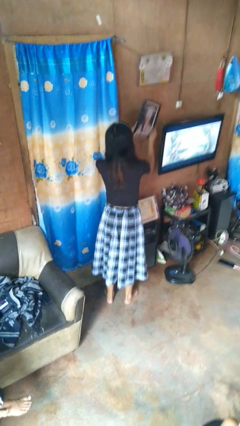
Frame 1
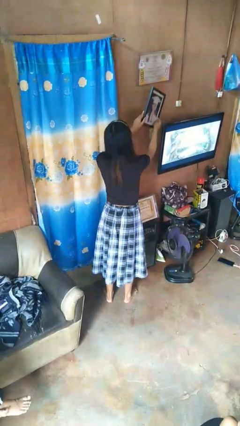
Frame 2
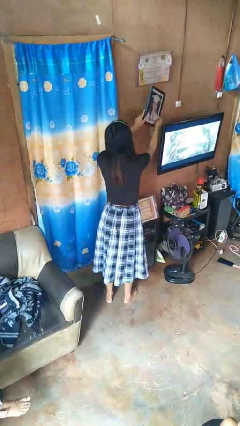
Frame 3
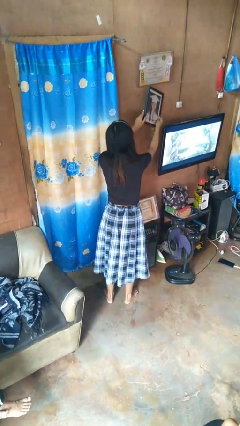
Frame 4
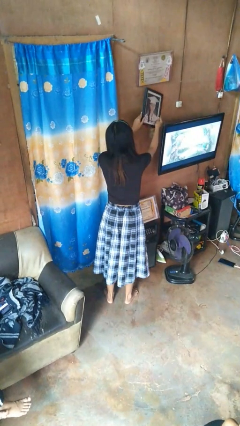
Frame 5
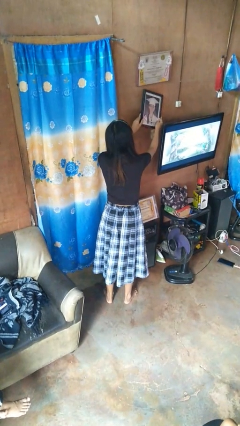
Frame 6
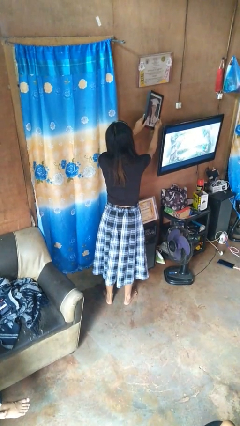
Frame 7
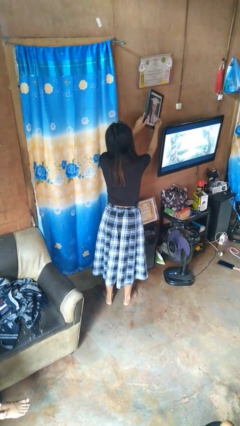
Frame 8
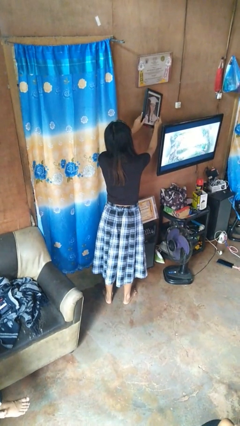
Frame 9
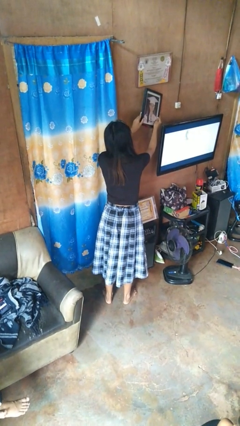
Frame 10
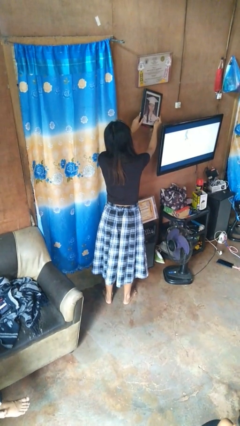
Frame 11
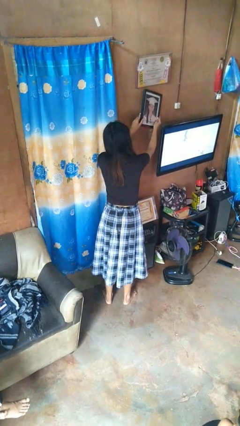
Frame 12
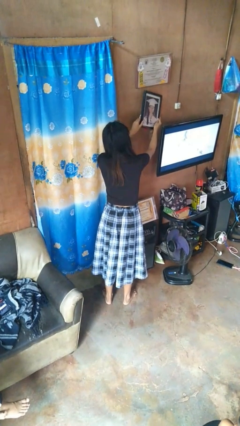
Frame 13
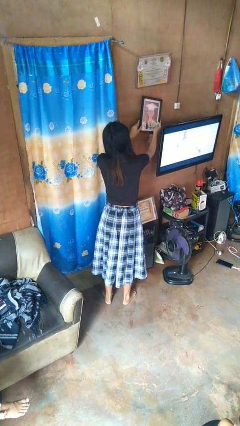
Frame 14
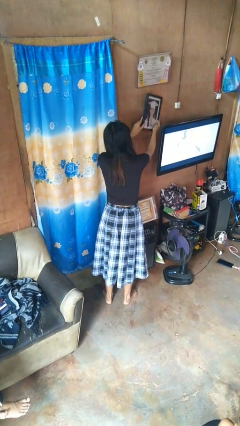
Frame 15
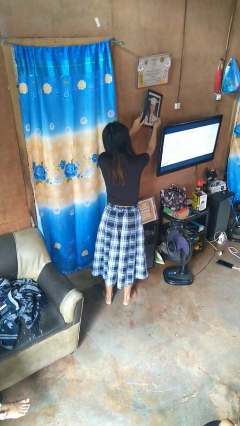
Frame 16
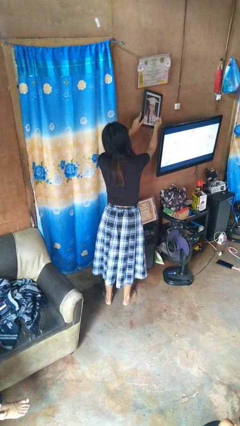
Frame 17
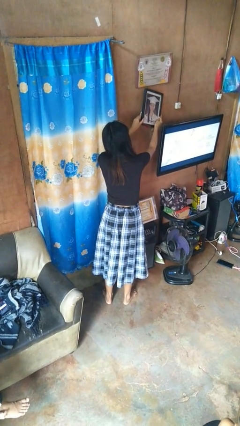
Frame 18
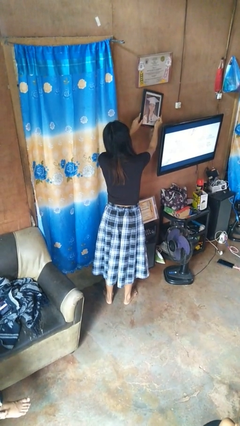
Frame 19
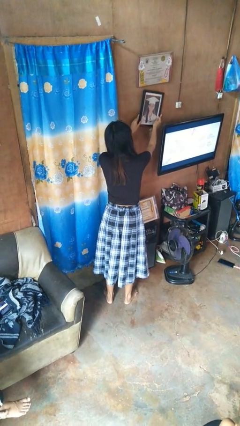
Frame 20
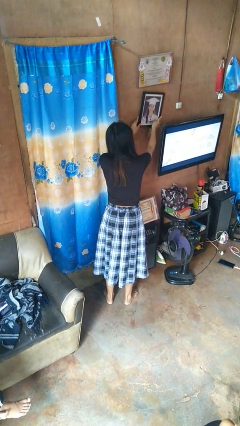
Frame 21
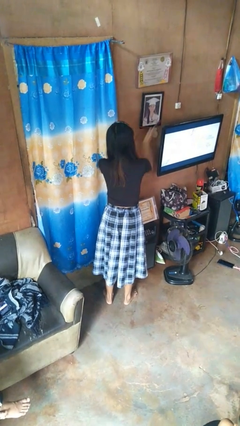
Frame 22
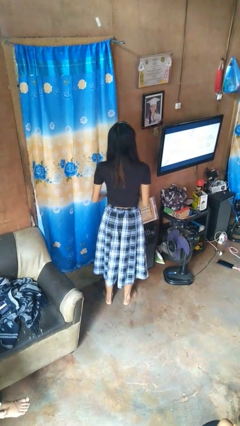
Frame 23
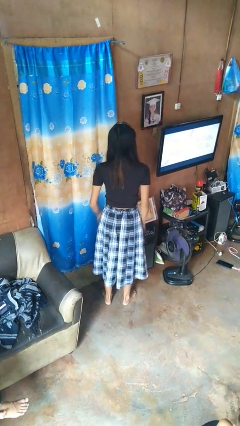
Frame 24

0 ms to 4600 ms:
person puts up picture frame

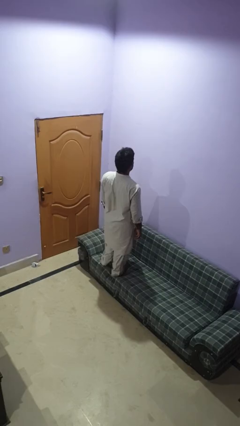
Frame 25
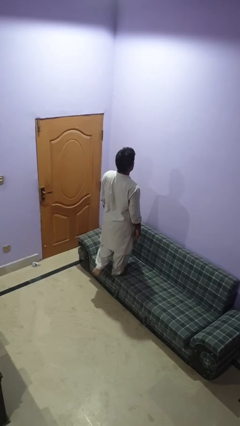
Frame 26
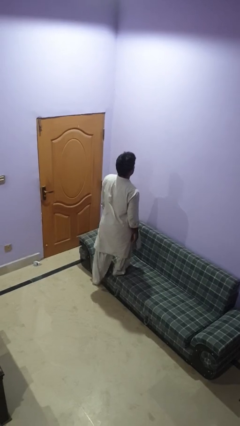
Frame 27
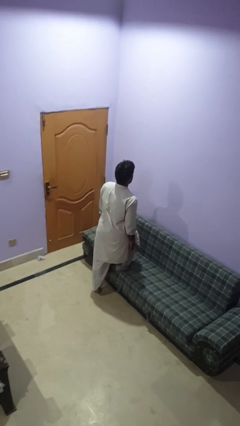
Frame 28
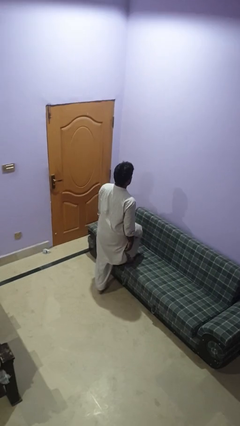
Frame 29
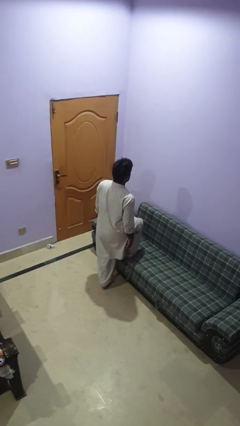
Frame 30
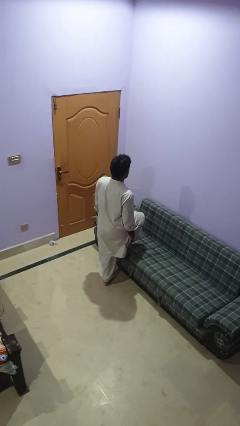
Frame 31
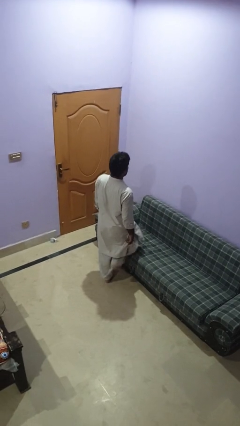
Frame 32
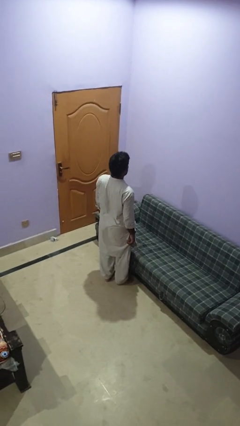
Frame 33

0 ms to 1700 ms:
person climbs off couch

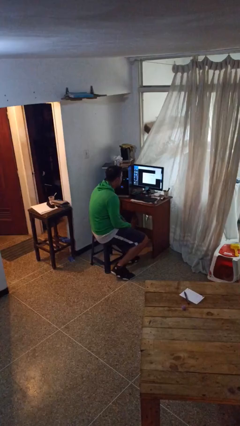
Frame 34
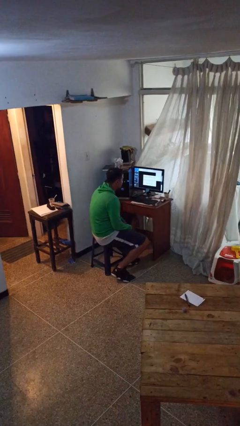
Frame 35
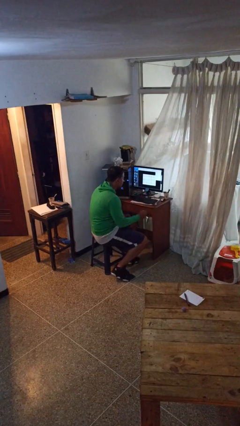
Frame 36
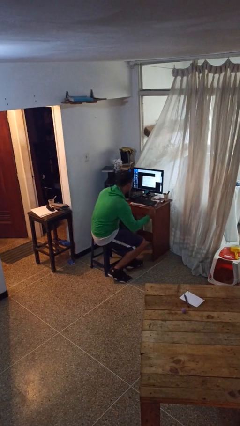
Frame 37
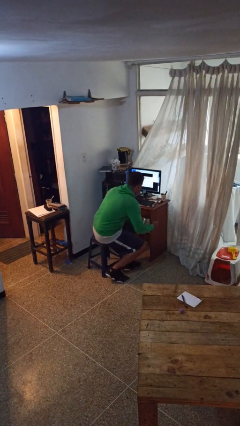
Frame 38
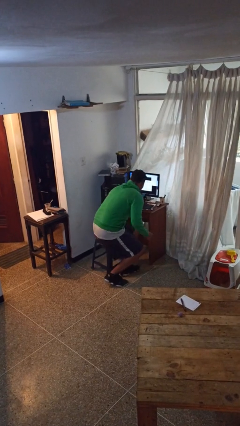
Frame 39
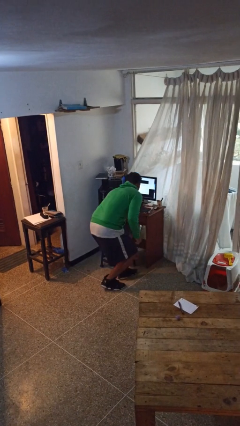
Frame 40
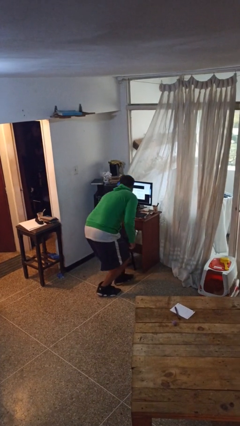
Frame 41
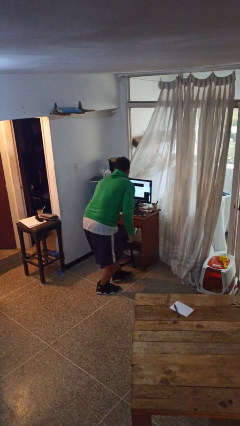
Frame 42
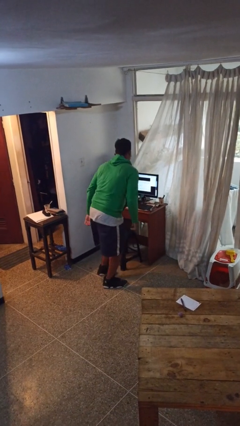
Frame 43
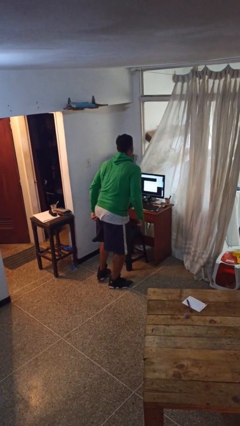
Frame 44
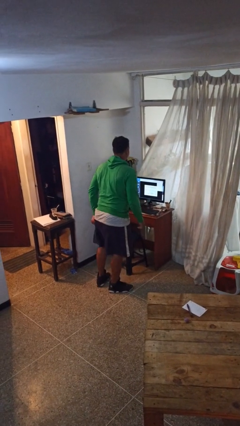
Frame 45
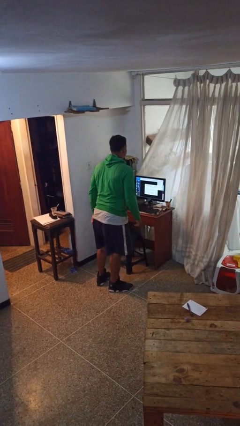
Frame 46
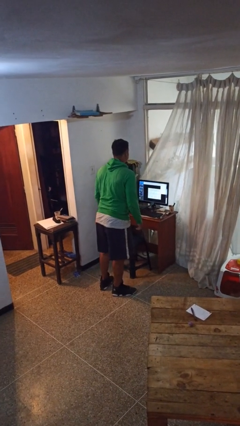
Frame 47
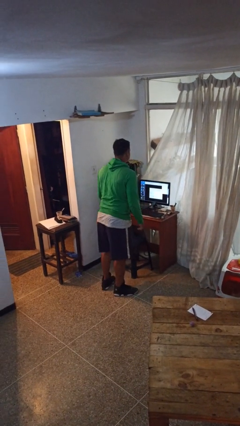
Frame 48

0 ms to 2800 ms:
person stands up

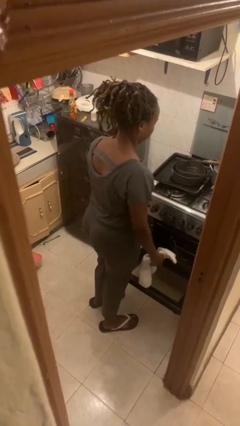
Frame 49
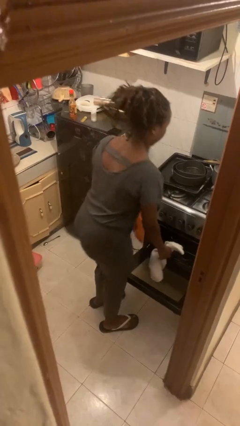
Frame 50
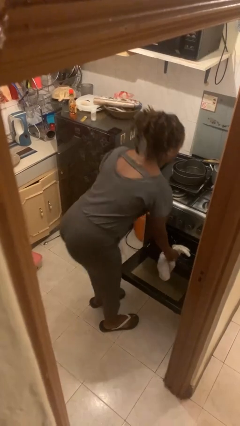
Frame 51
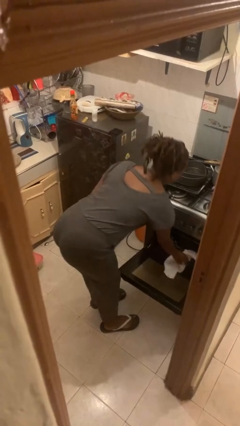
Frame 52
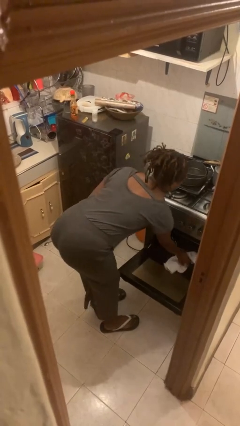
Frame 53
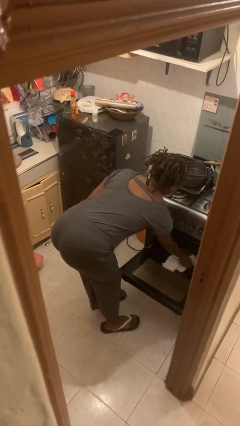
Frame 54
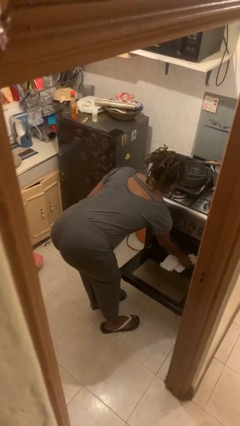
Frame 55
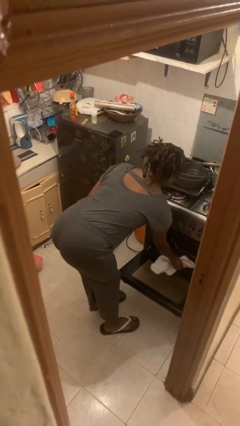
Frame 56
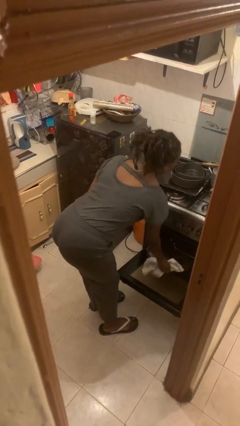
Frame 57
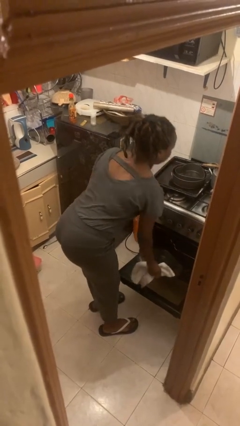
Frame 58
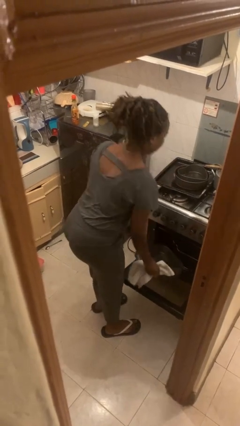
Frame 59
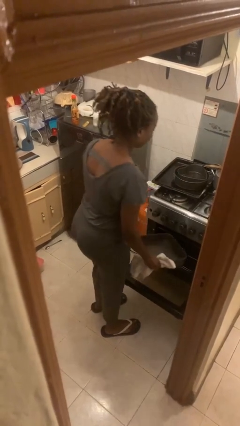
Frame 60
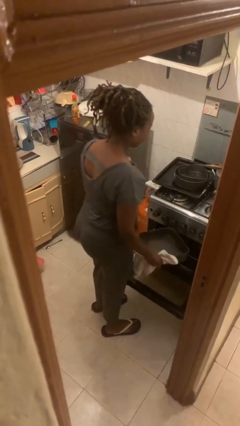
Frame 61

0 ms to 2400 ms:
person takes object from oven

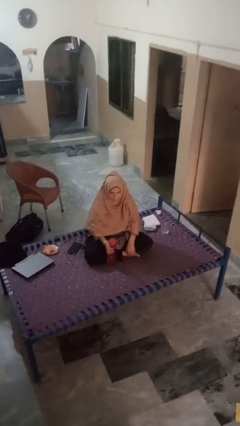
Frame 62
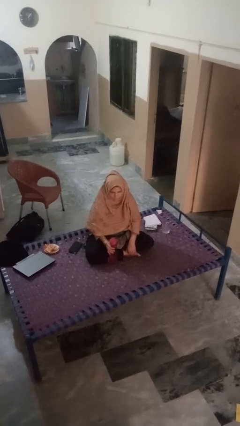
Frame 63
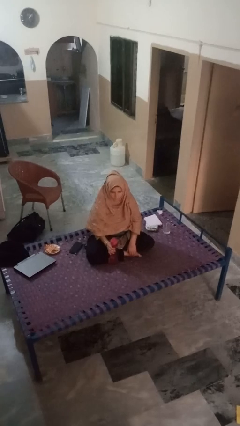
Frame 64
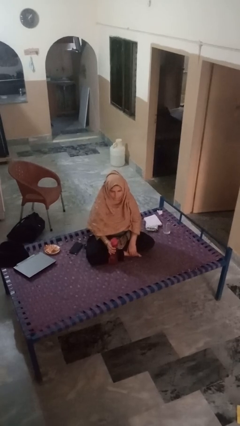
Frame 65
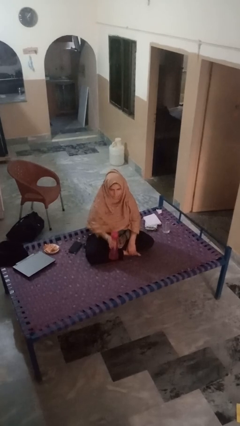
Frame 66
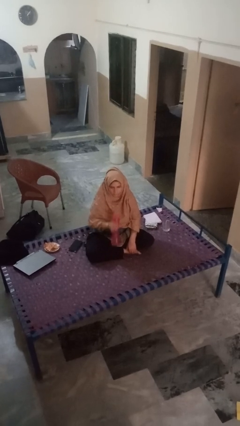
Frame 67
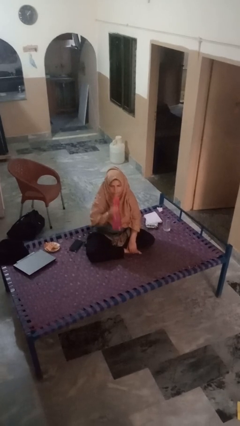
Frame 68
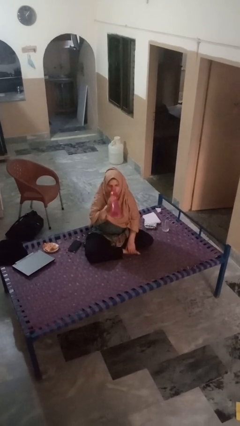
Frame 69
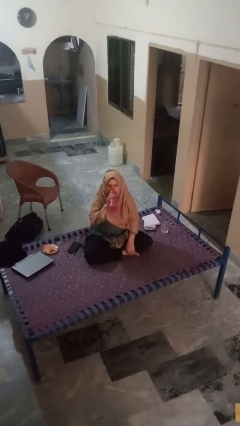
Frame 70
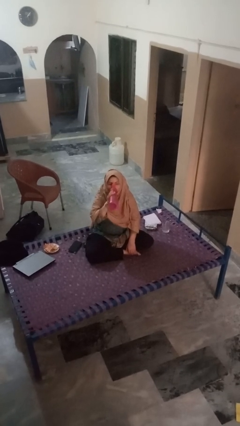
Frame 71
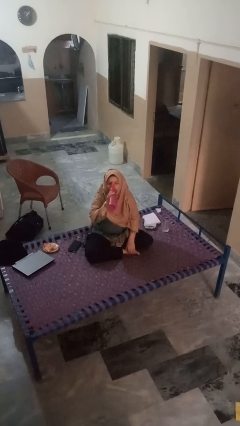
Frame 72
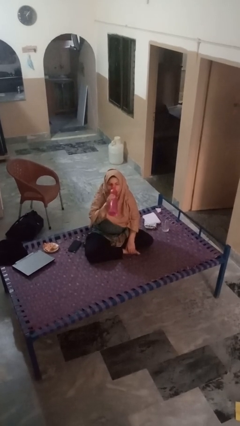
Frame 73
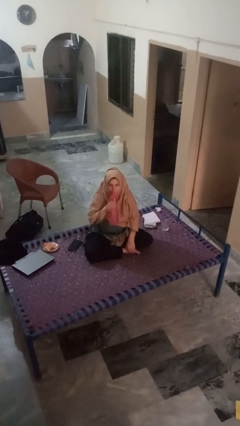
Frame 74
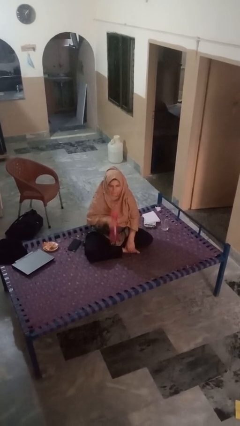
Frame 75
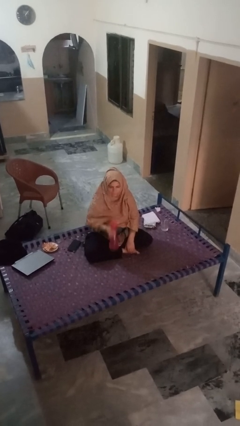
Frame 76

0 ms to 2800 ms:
person drinks from bottle

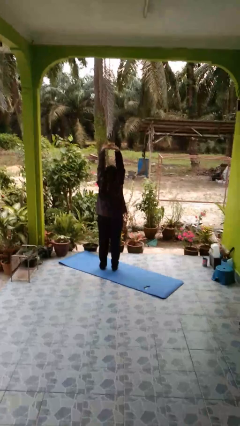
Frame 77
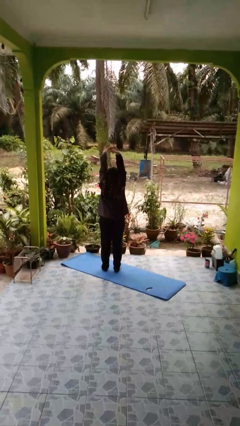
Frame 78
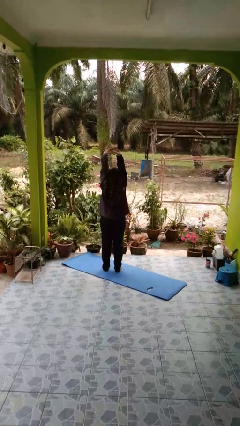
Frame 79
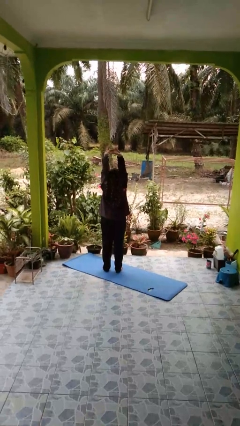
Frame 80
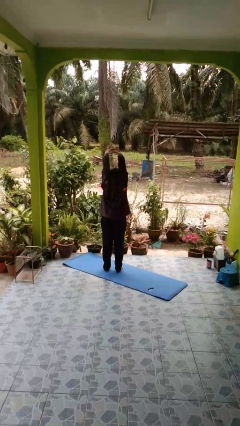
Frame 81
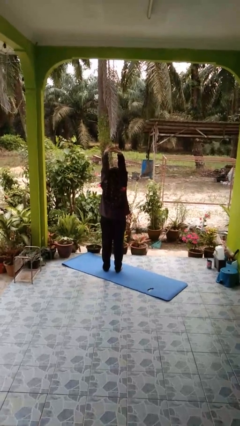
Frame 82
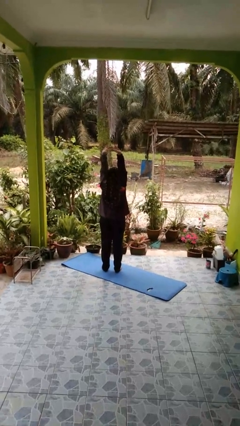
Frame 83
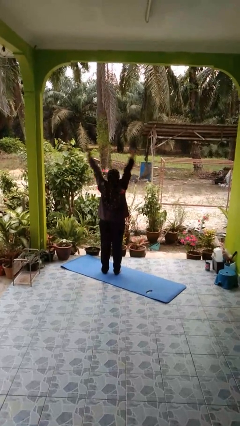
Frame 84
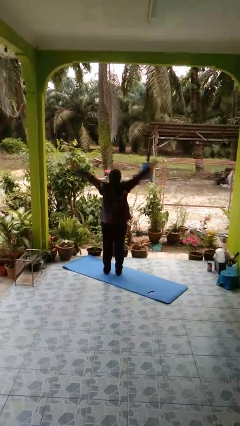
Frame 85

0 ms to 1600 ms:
person stretches arms over head

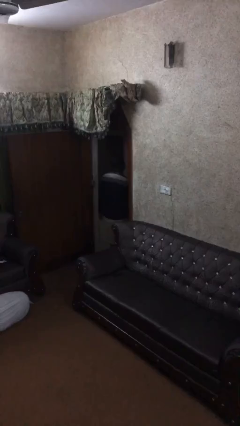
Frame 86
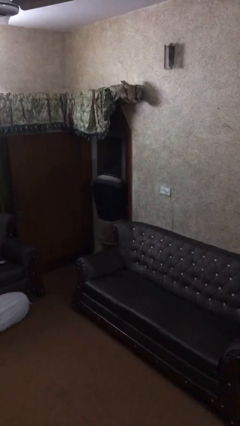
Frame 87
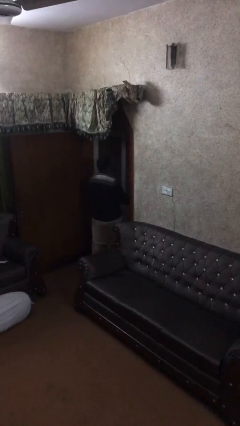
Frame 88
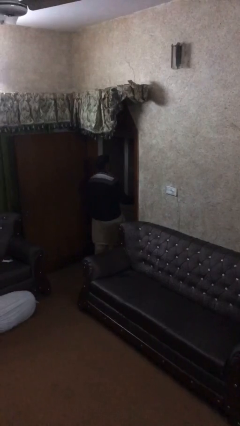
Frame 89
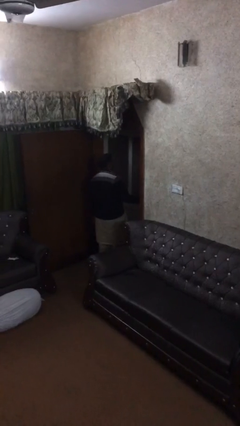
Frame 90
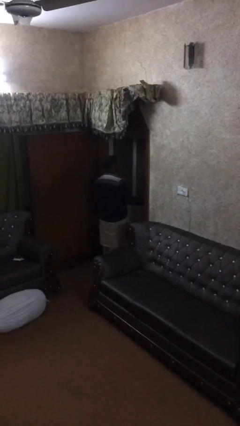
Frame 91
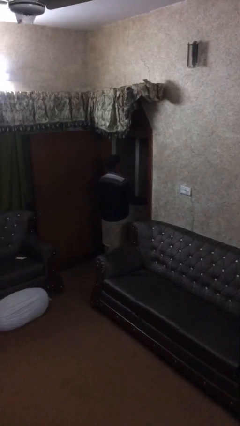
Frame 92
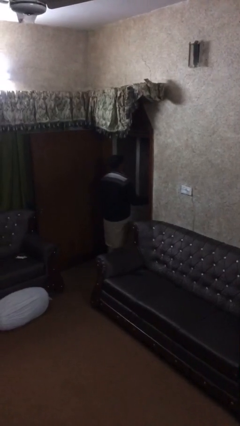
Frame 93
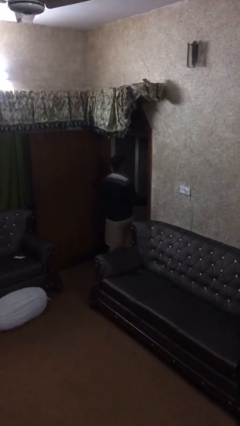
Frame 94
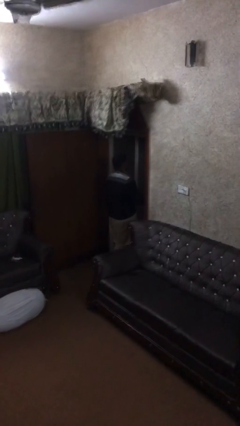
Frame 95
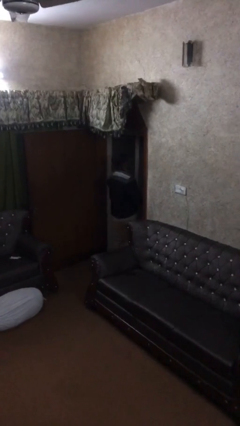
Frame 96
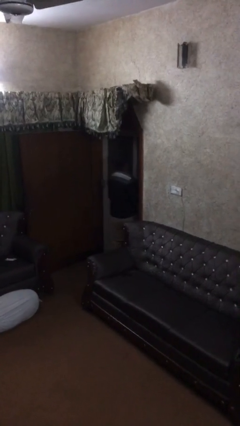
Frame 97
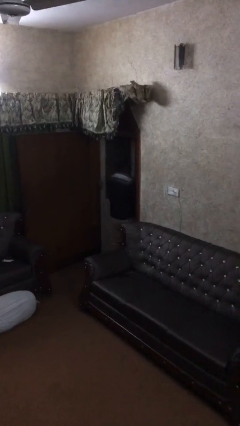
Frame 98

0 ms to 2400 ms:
person closes facility door
